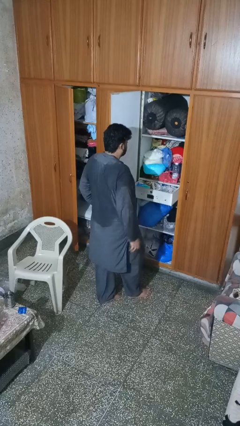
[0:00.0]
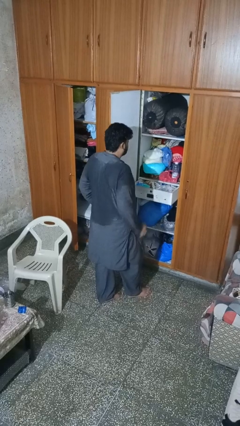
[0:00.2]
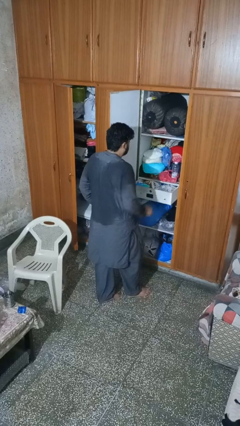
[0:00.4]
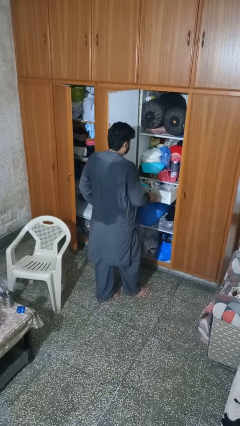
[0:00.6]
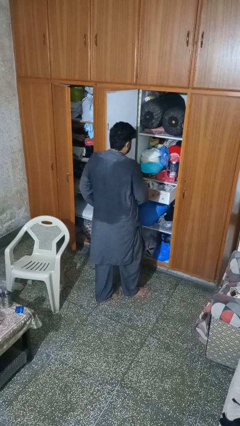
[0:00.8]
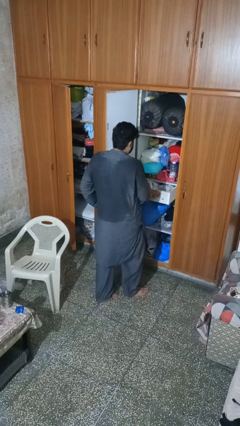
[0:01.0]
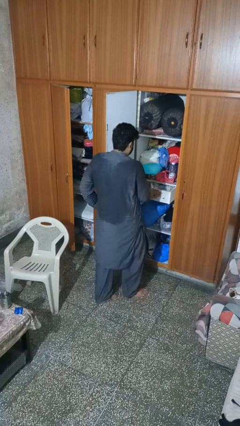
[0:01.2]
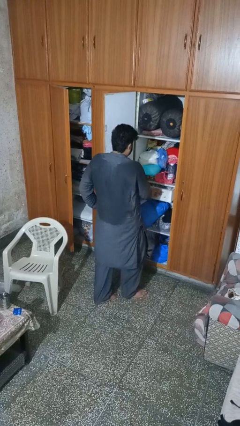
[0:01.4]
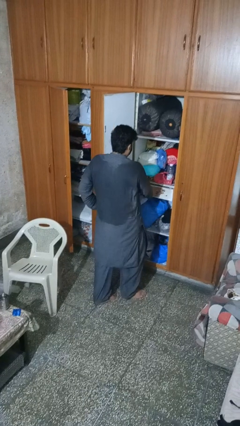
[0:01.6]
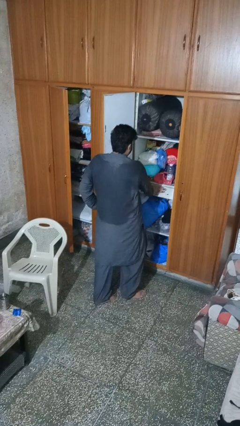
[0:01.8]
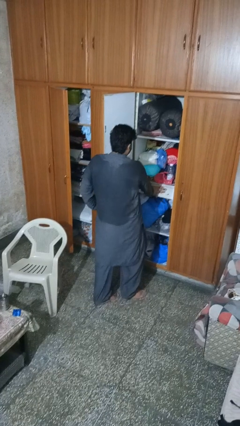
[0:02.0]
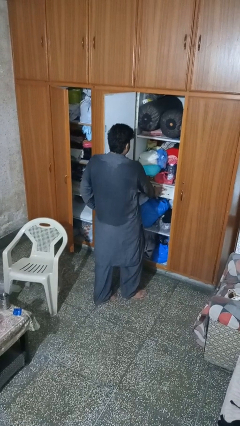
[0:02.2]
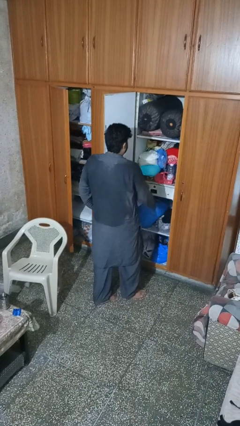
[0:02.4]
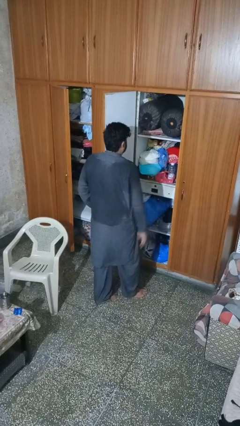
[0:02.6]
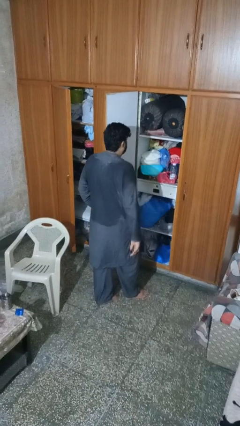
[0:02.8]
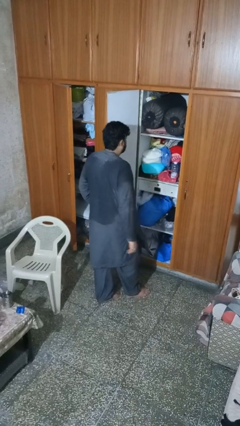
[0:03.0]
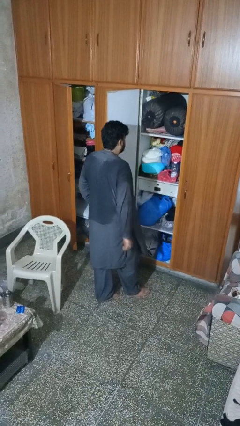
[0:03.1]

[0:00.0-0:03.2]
person closes dresser drawer

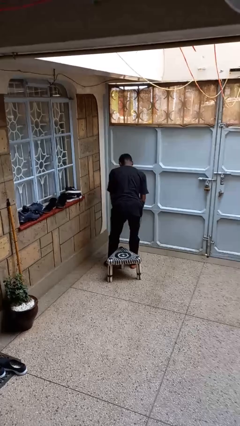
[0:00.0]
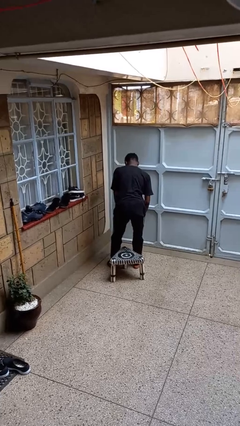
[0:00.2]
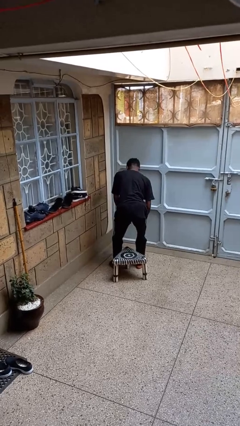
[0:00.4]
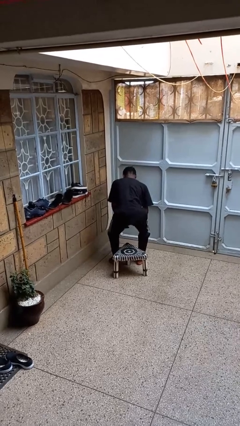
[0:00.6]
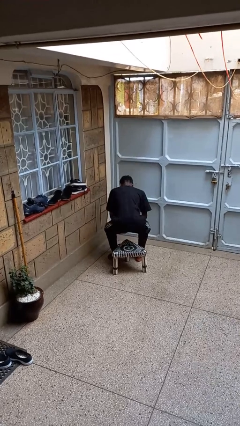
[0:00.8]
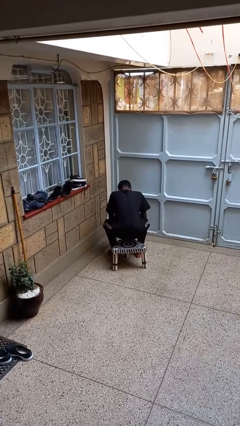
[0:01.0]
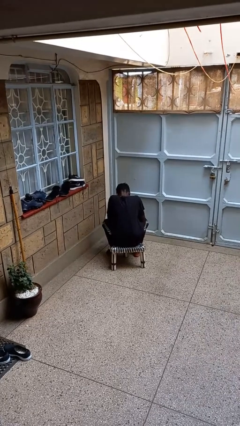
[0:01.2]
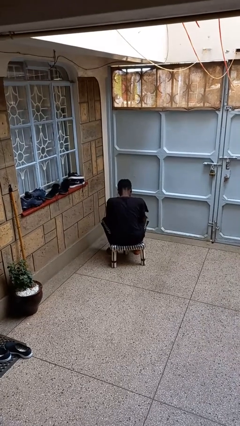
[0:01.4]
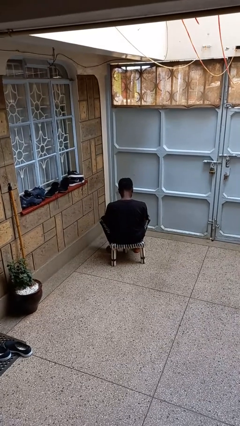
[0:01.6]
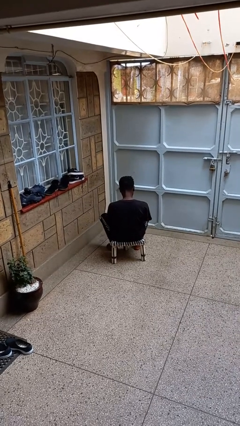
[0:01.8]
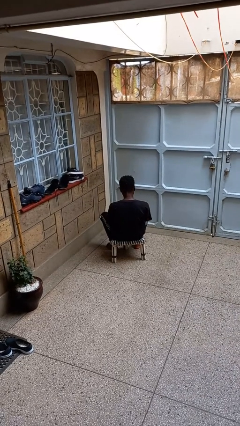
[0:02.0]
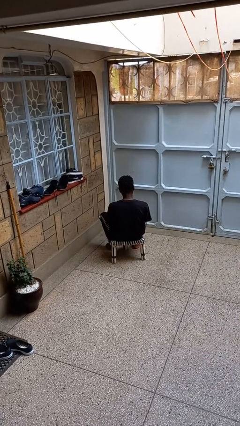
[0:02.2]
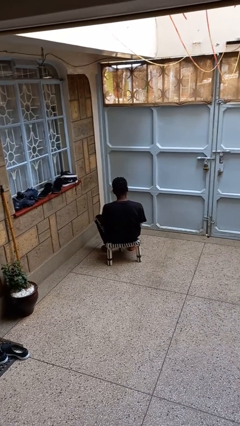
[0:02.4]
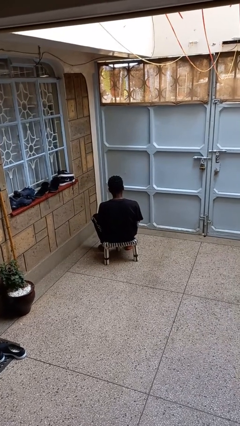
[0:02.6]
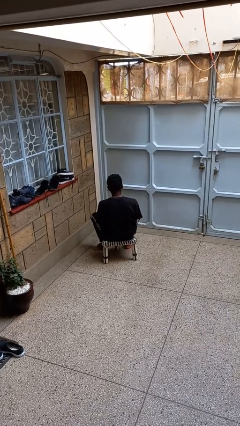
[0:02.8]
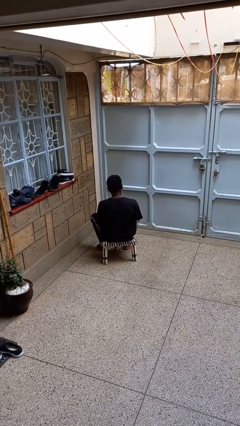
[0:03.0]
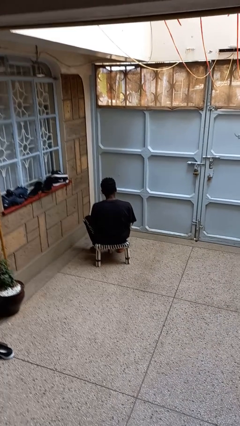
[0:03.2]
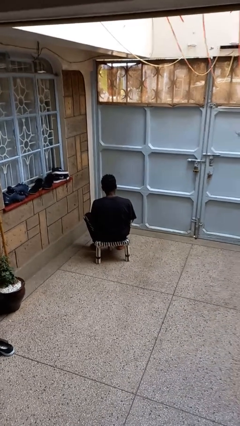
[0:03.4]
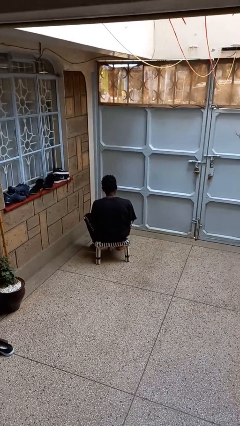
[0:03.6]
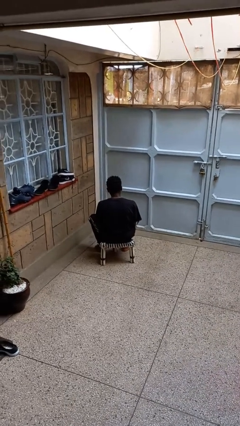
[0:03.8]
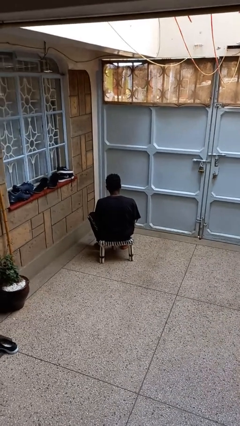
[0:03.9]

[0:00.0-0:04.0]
person sits down

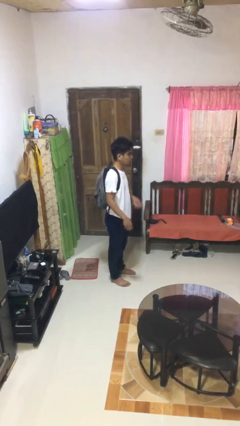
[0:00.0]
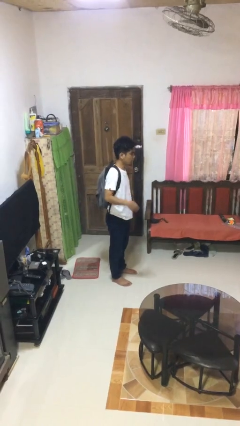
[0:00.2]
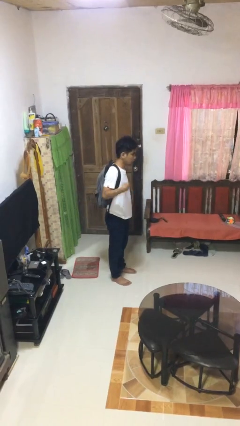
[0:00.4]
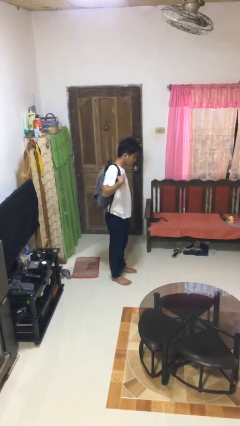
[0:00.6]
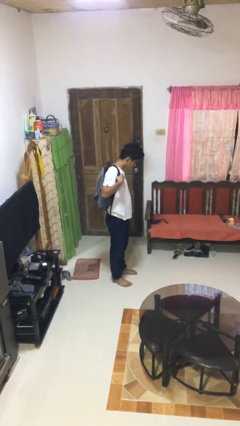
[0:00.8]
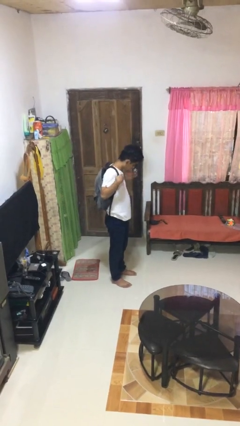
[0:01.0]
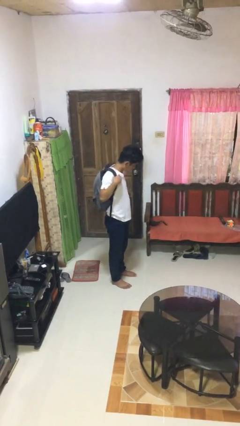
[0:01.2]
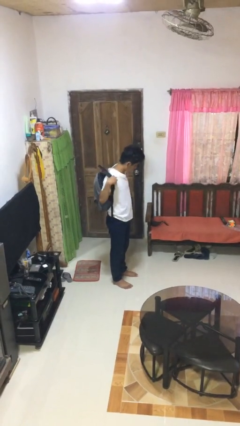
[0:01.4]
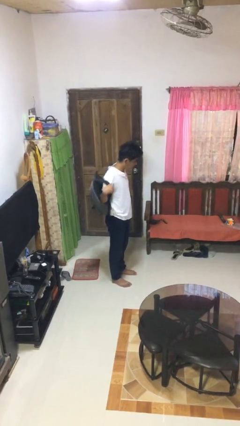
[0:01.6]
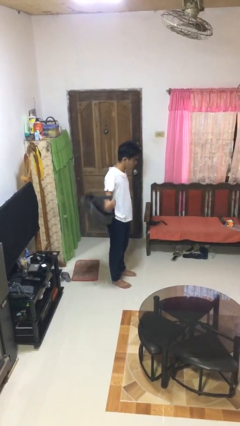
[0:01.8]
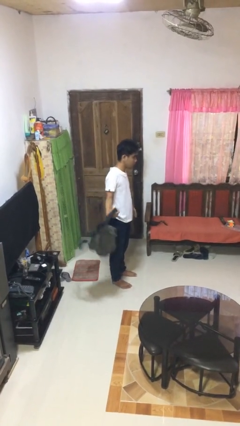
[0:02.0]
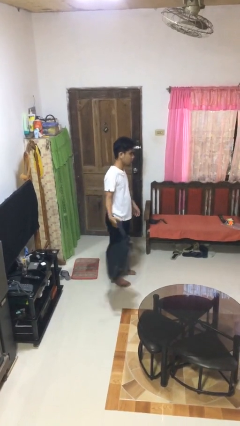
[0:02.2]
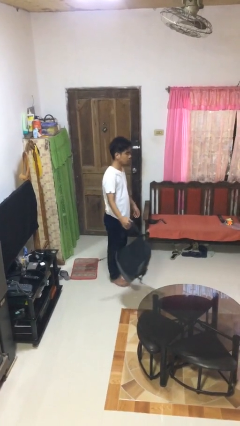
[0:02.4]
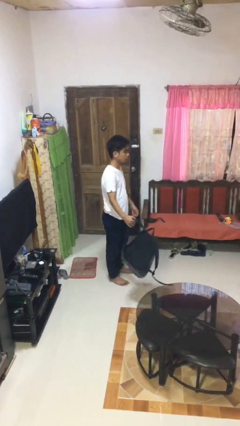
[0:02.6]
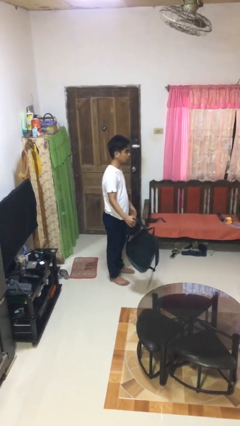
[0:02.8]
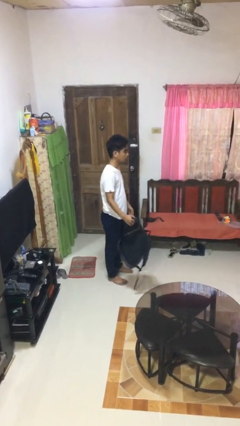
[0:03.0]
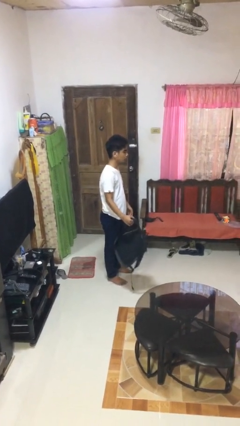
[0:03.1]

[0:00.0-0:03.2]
person takes off backpack

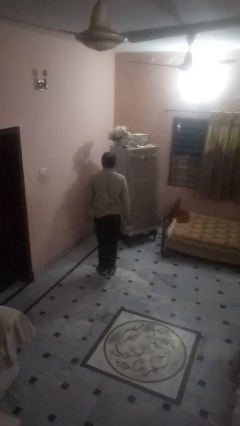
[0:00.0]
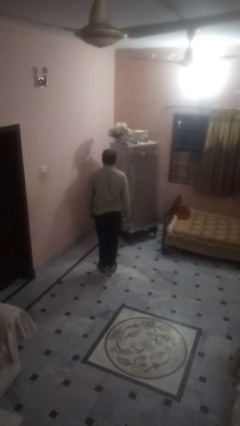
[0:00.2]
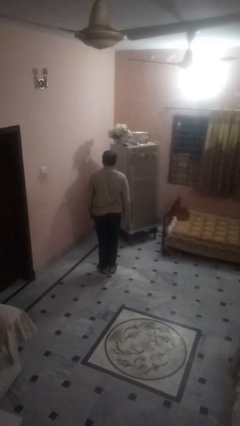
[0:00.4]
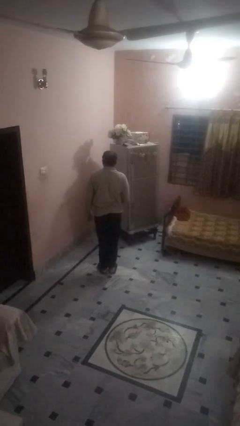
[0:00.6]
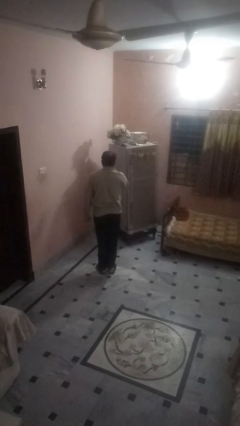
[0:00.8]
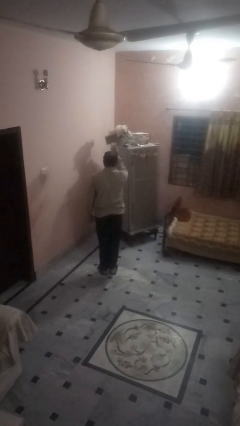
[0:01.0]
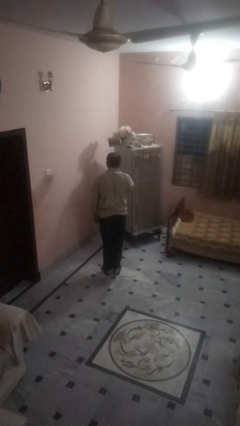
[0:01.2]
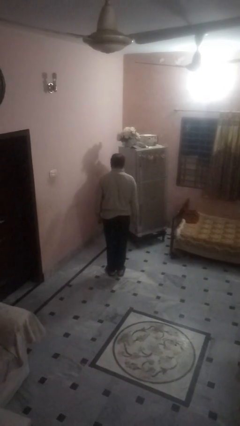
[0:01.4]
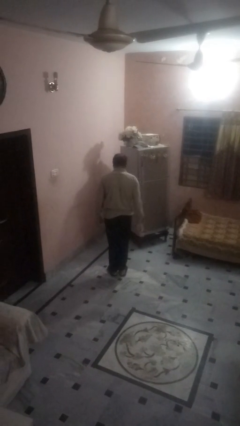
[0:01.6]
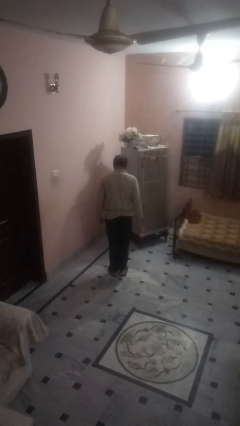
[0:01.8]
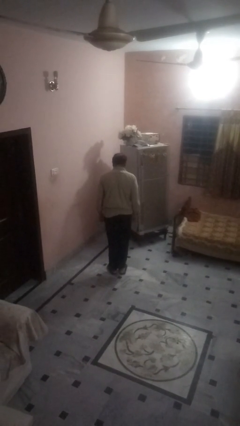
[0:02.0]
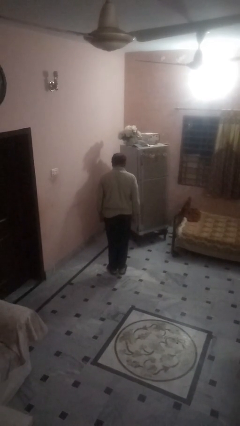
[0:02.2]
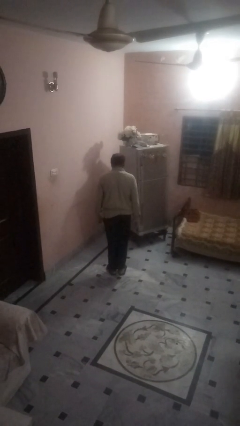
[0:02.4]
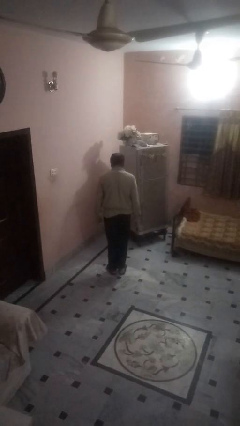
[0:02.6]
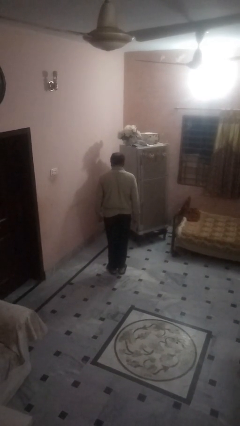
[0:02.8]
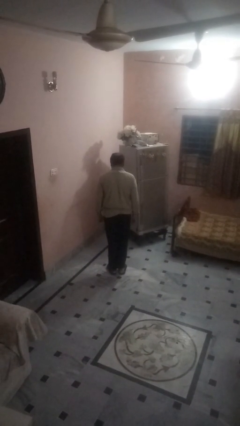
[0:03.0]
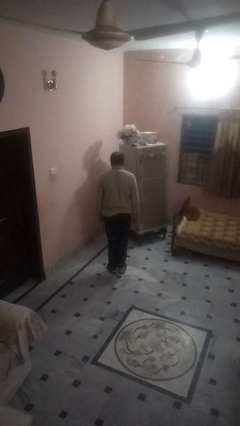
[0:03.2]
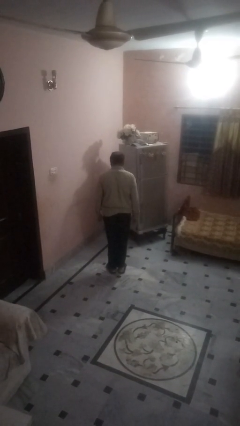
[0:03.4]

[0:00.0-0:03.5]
person throws object into air

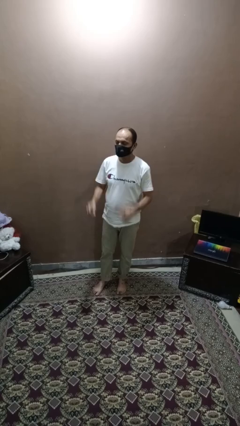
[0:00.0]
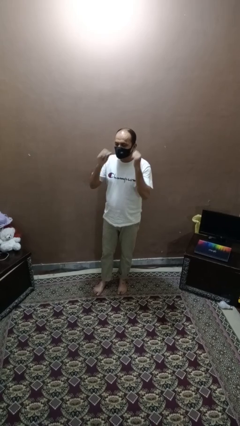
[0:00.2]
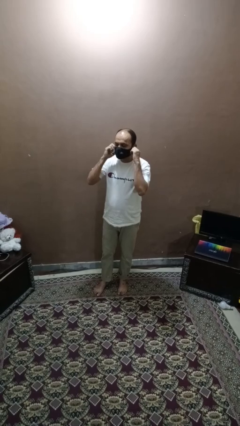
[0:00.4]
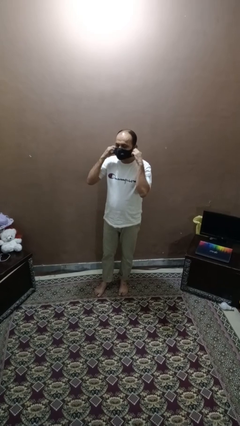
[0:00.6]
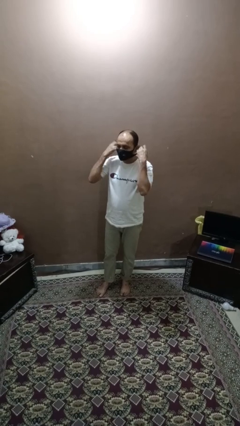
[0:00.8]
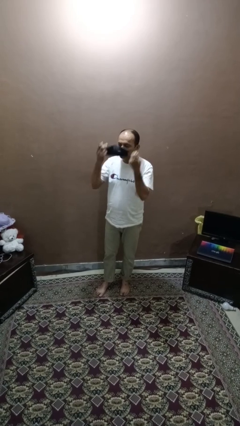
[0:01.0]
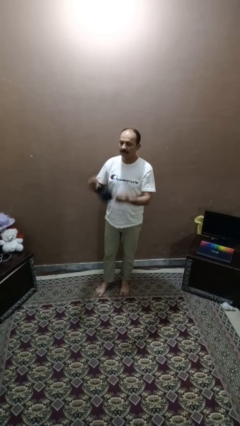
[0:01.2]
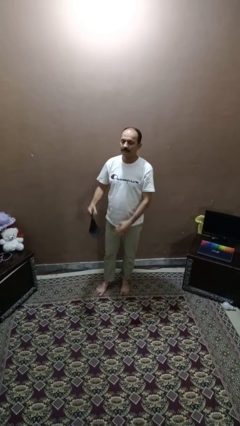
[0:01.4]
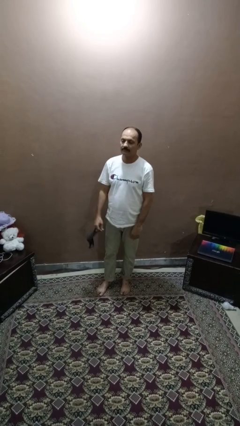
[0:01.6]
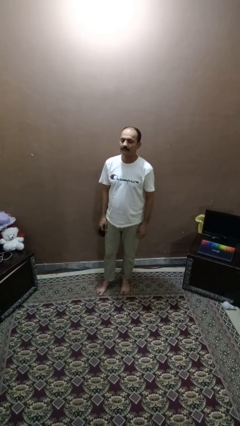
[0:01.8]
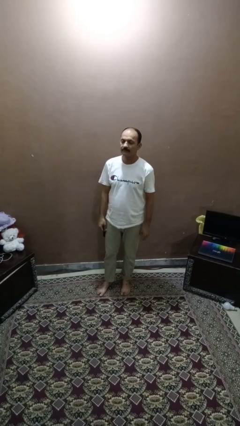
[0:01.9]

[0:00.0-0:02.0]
person takes off facemask

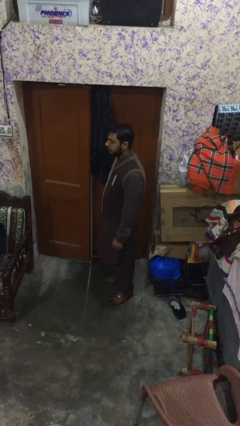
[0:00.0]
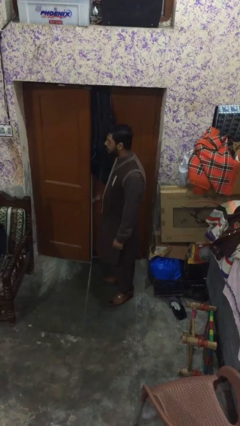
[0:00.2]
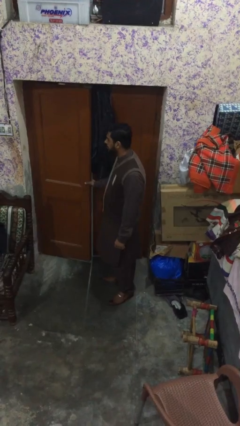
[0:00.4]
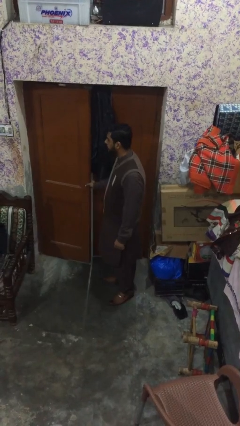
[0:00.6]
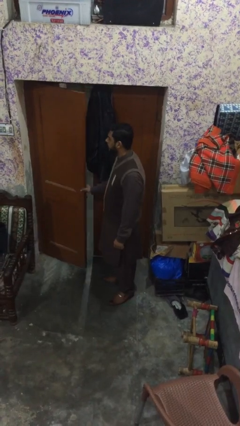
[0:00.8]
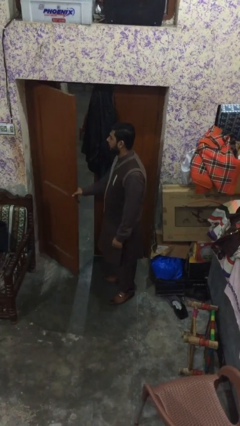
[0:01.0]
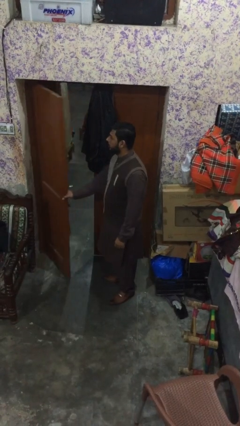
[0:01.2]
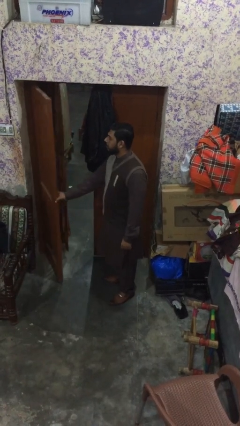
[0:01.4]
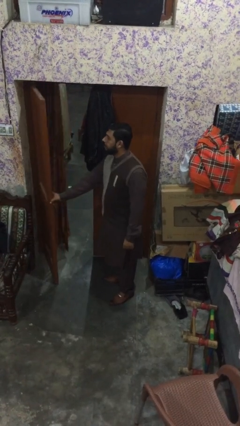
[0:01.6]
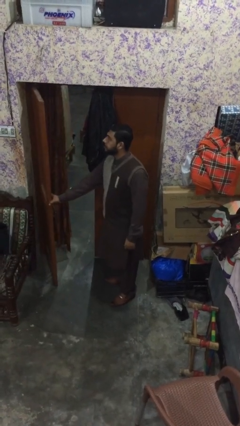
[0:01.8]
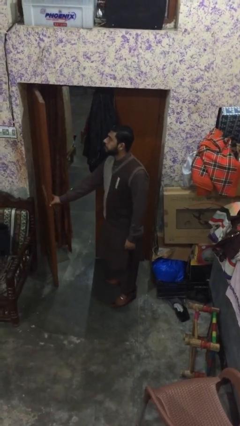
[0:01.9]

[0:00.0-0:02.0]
person opens facility door
